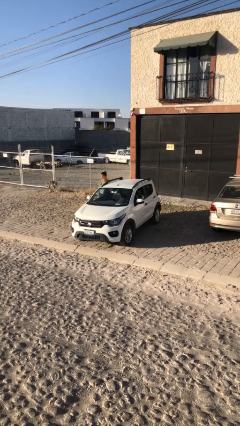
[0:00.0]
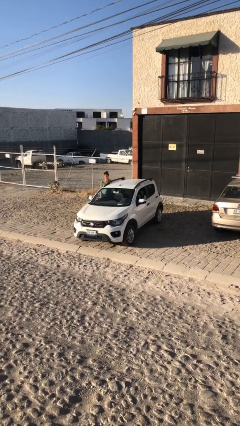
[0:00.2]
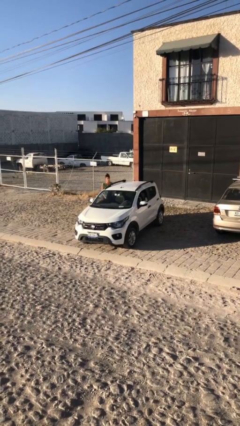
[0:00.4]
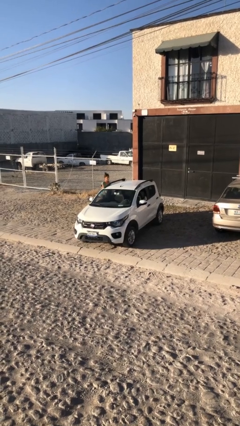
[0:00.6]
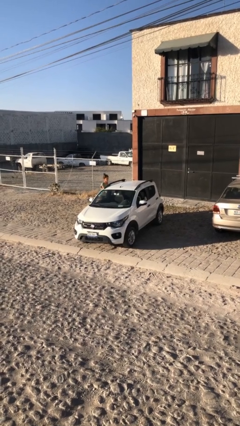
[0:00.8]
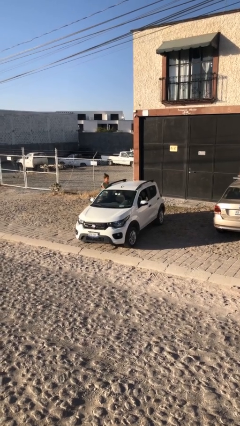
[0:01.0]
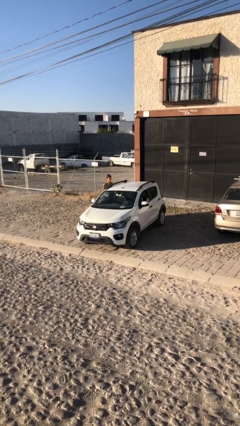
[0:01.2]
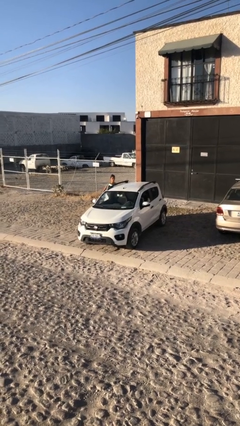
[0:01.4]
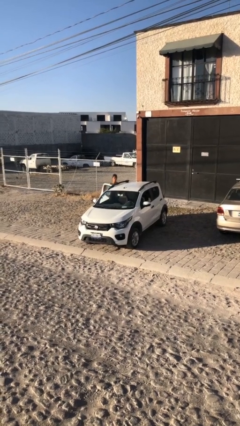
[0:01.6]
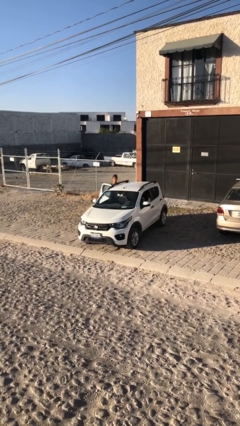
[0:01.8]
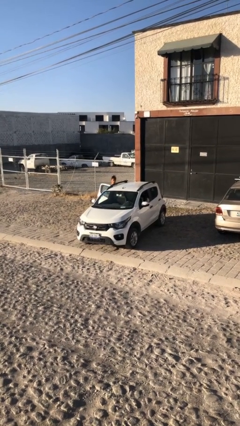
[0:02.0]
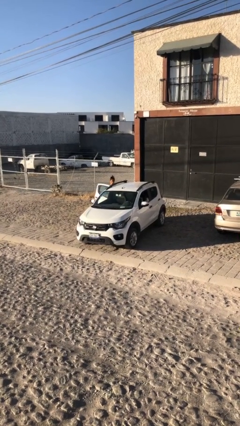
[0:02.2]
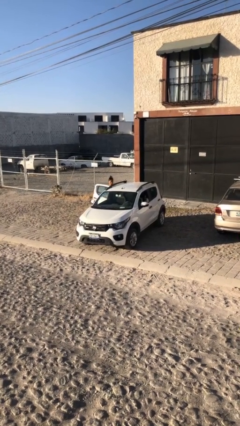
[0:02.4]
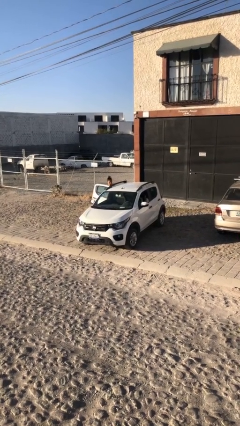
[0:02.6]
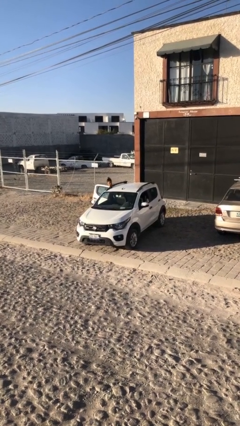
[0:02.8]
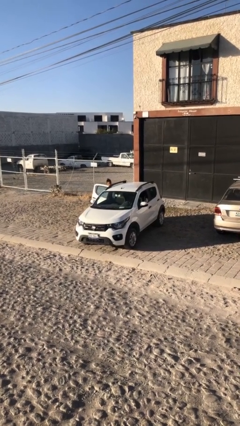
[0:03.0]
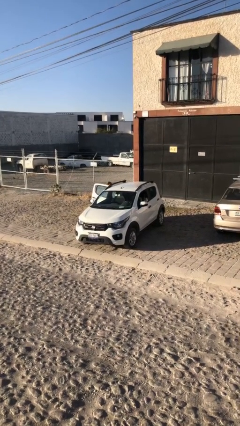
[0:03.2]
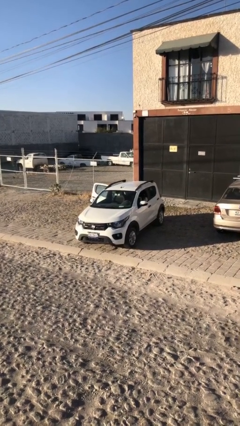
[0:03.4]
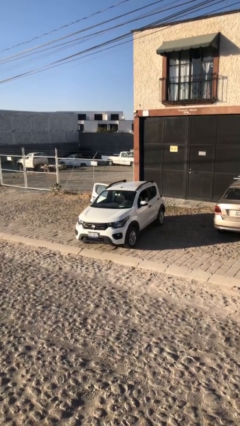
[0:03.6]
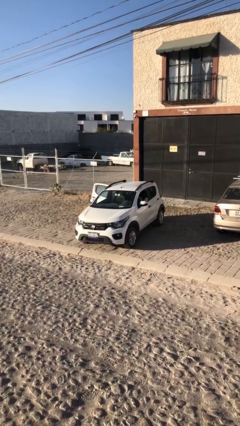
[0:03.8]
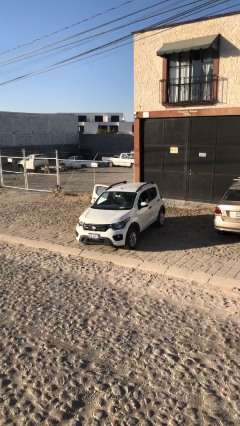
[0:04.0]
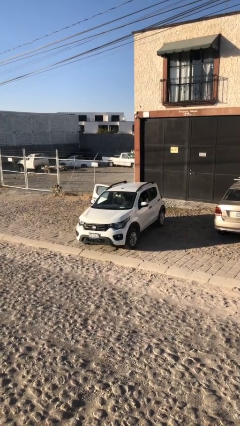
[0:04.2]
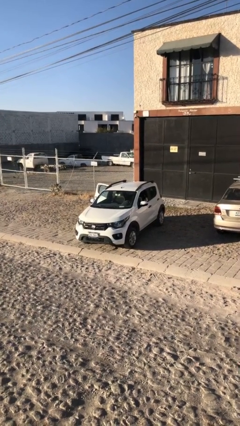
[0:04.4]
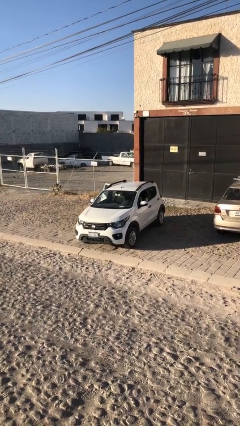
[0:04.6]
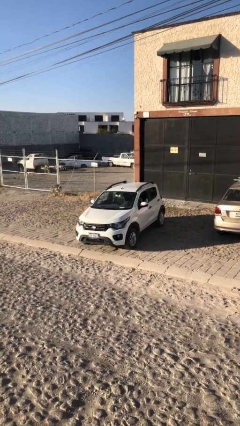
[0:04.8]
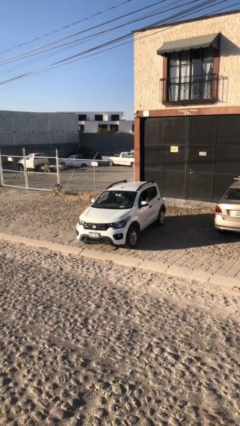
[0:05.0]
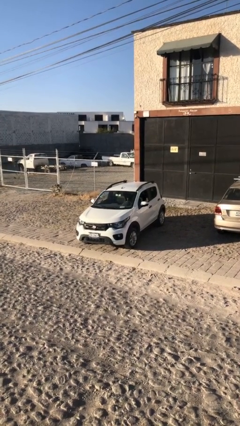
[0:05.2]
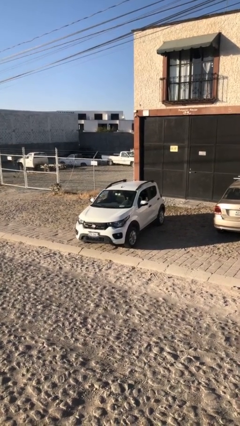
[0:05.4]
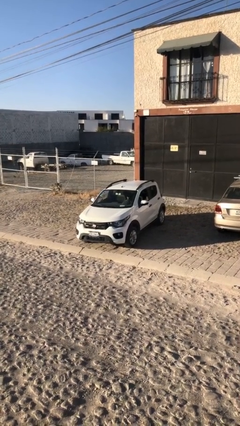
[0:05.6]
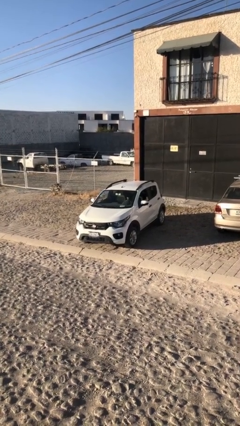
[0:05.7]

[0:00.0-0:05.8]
car picks up person

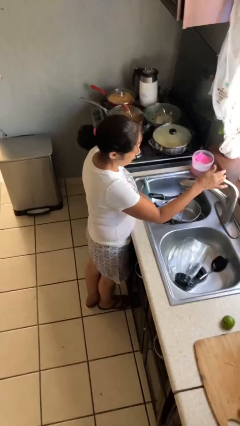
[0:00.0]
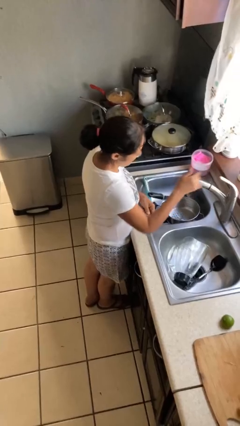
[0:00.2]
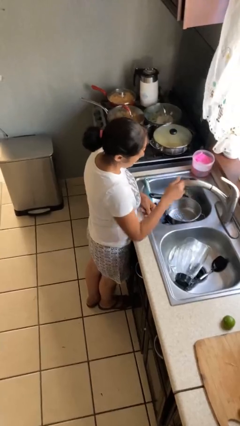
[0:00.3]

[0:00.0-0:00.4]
person turns off faucet

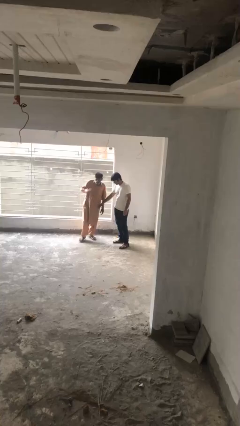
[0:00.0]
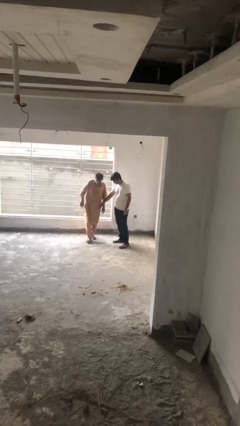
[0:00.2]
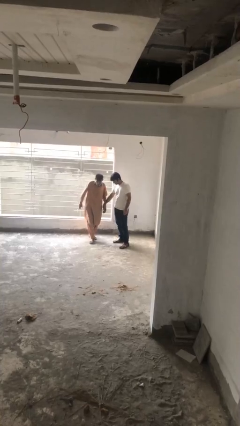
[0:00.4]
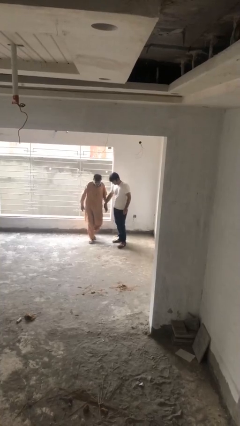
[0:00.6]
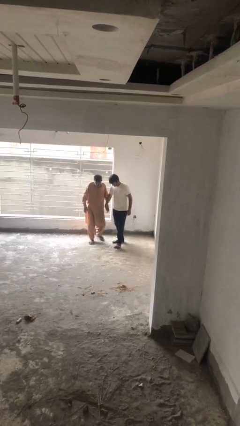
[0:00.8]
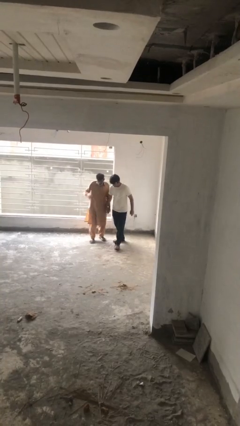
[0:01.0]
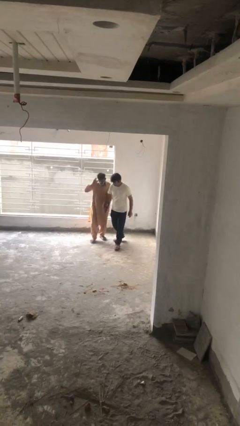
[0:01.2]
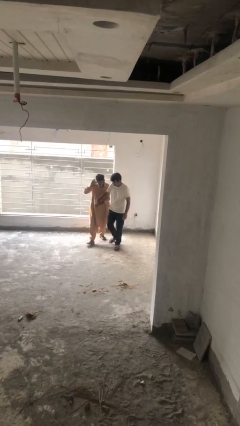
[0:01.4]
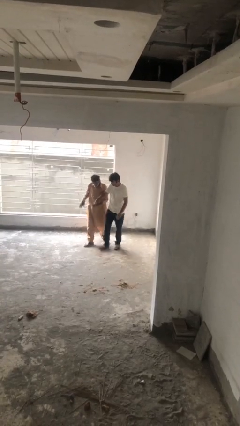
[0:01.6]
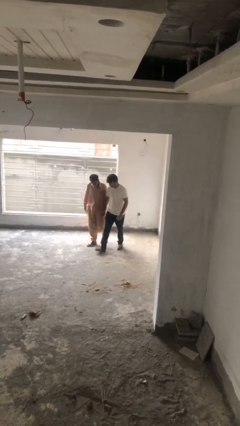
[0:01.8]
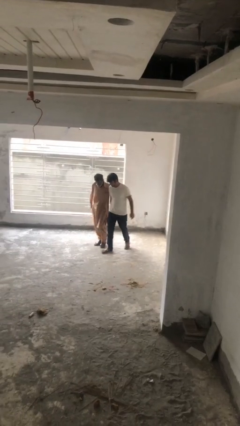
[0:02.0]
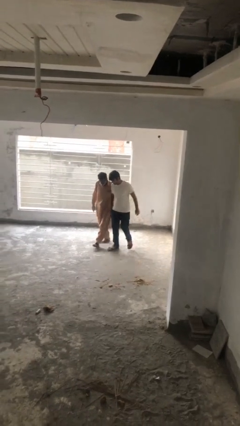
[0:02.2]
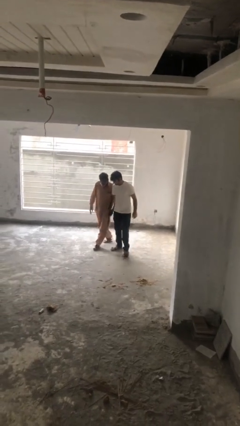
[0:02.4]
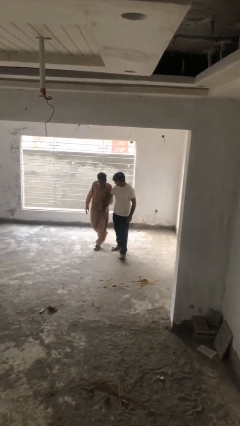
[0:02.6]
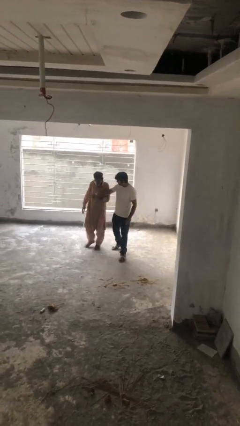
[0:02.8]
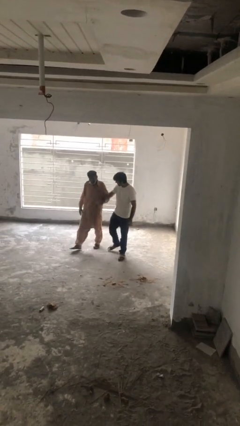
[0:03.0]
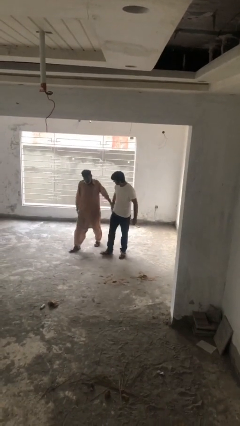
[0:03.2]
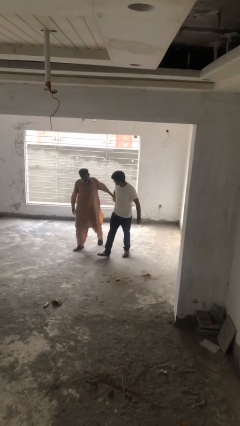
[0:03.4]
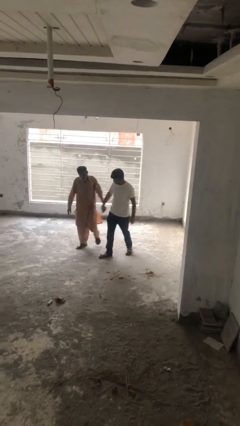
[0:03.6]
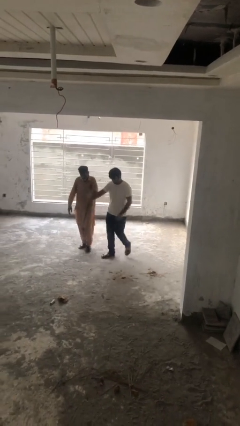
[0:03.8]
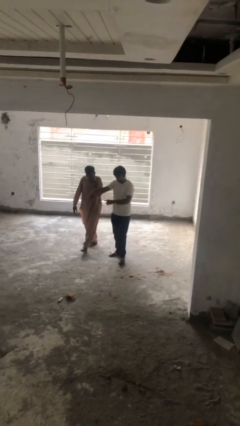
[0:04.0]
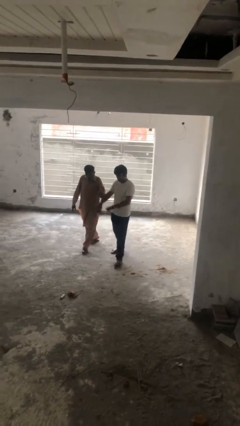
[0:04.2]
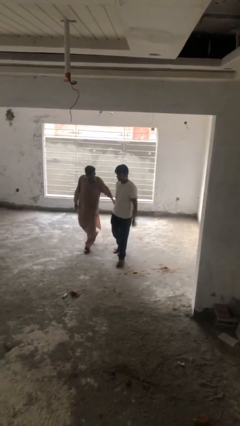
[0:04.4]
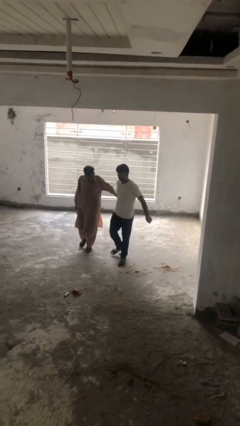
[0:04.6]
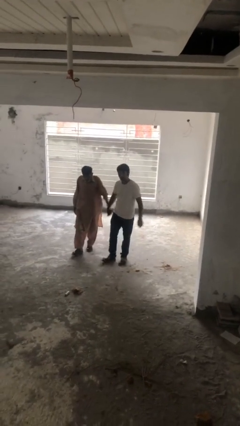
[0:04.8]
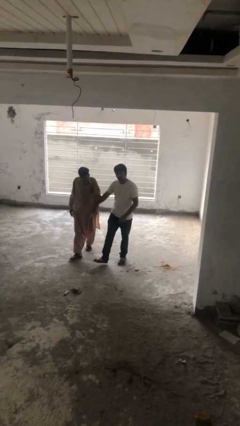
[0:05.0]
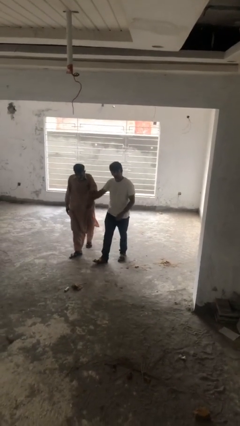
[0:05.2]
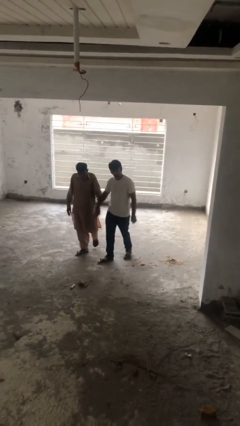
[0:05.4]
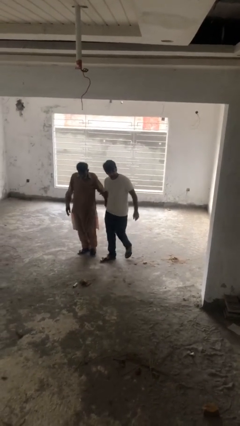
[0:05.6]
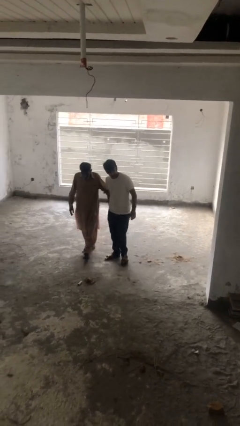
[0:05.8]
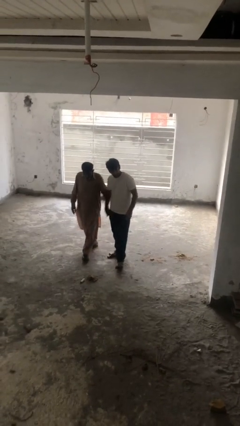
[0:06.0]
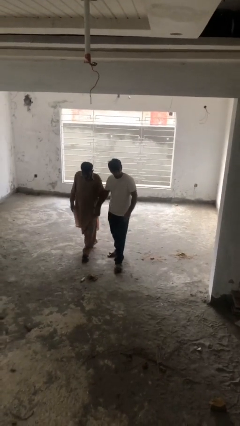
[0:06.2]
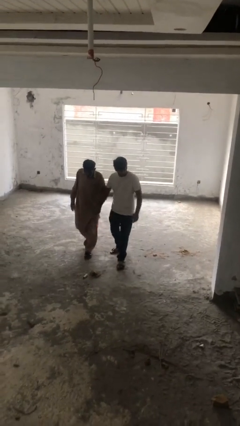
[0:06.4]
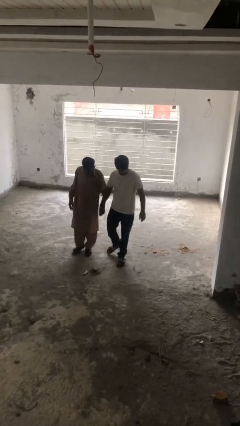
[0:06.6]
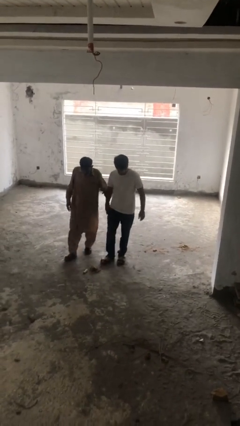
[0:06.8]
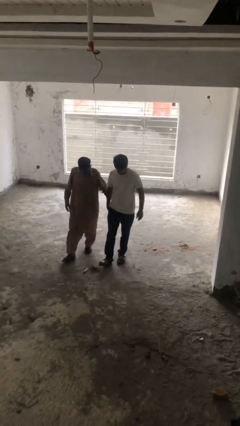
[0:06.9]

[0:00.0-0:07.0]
person holds hand

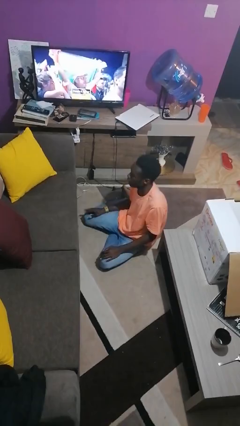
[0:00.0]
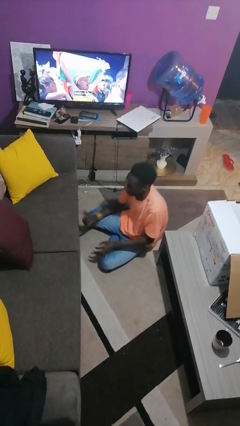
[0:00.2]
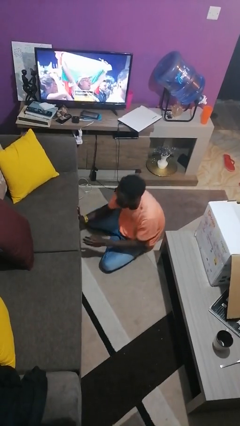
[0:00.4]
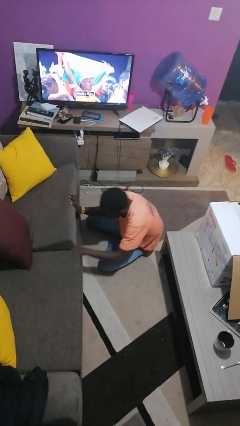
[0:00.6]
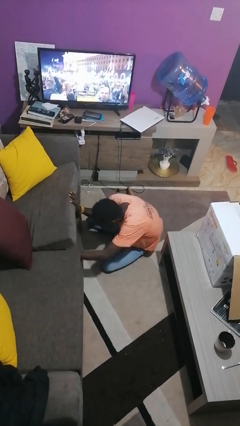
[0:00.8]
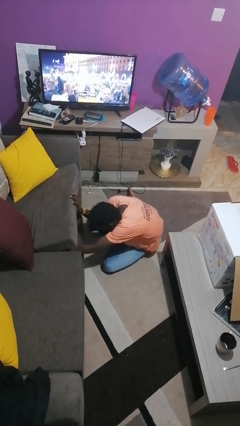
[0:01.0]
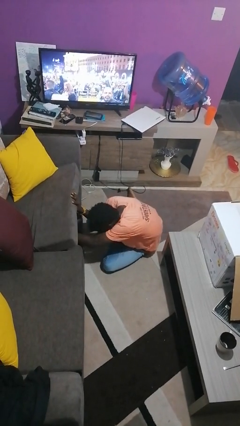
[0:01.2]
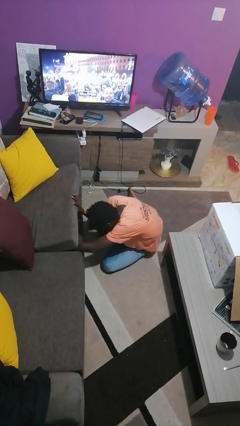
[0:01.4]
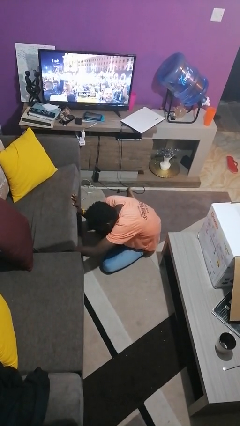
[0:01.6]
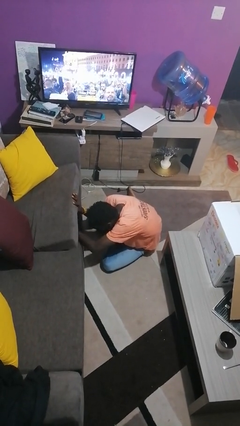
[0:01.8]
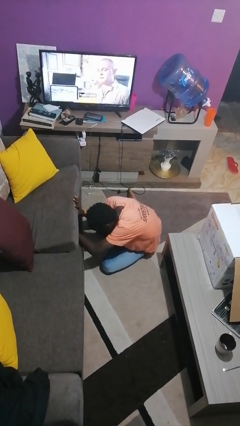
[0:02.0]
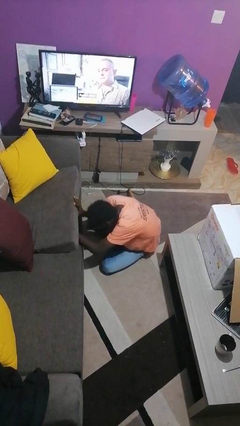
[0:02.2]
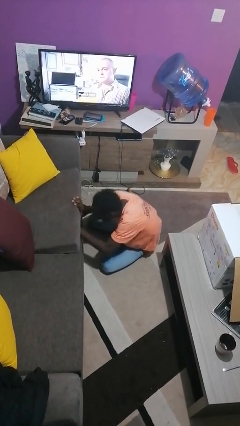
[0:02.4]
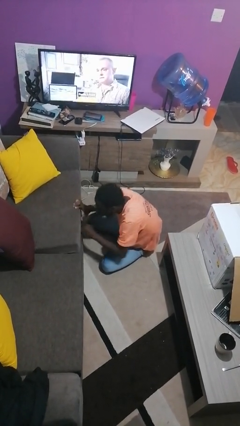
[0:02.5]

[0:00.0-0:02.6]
person searches under couch

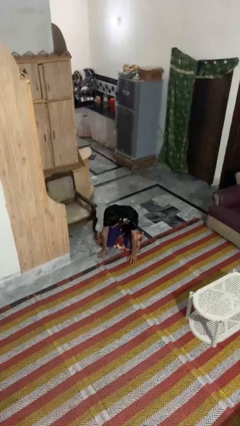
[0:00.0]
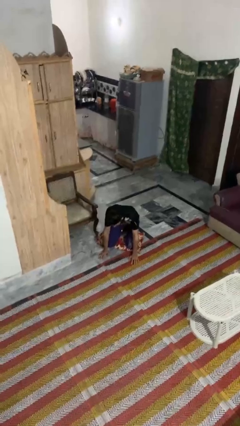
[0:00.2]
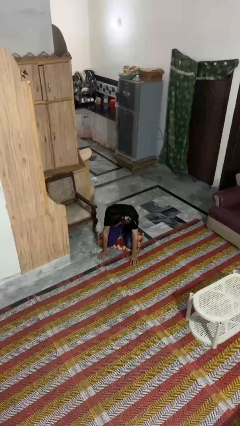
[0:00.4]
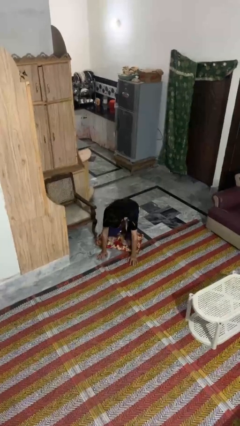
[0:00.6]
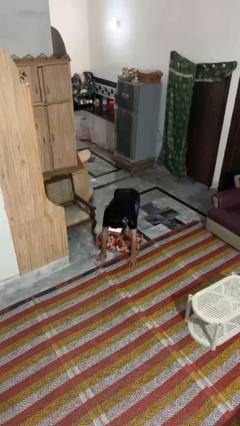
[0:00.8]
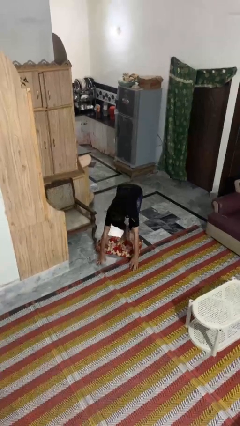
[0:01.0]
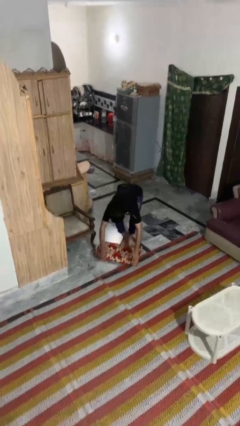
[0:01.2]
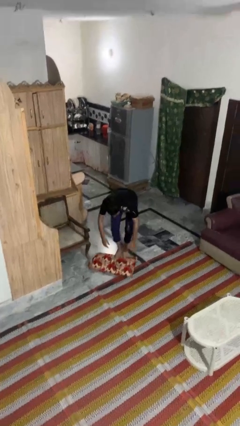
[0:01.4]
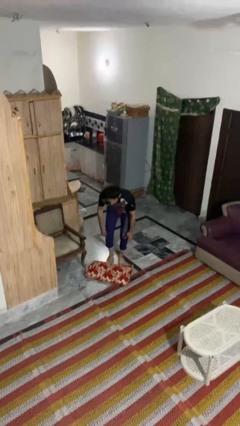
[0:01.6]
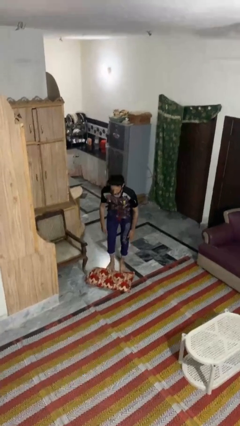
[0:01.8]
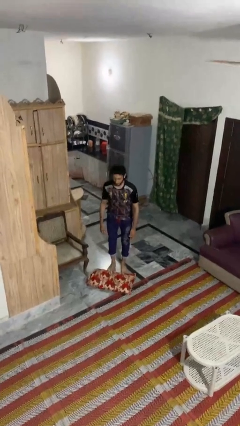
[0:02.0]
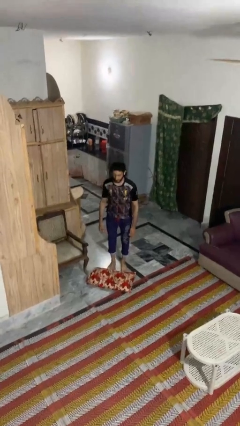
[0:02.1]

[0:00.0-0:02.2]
person stands up from floor
